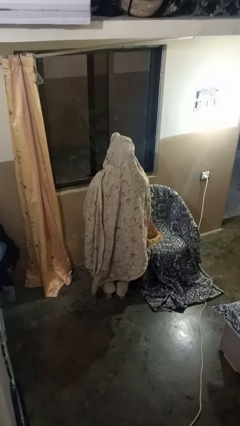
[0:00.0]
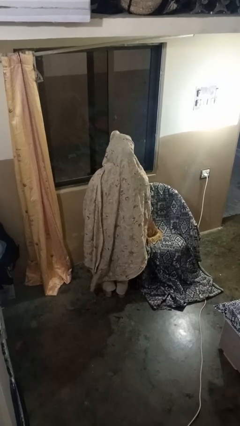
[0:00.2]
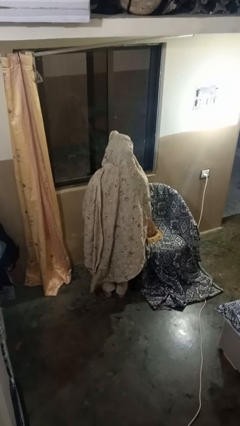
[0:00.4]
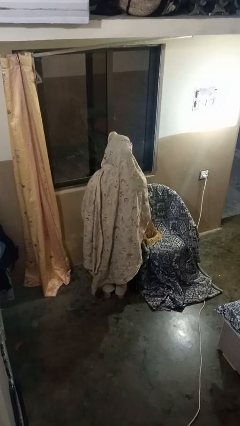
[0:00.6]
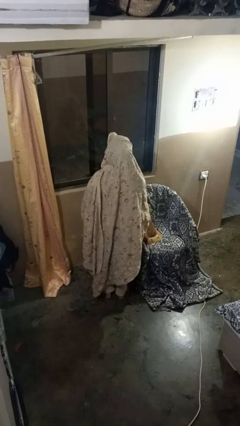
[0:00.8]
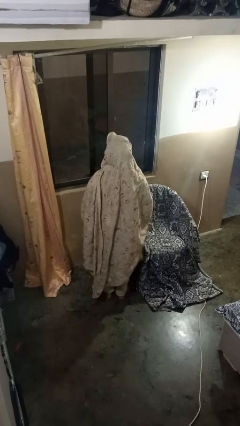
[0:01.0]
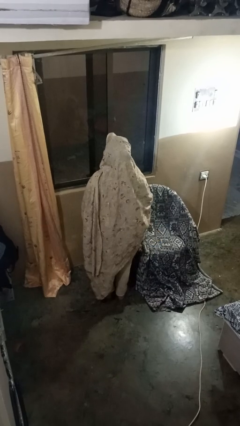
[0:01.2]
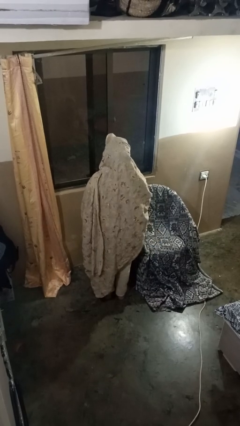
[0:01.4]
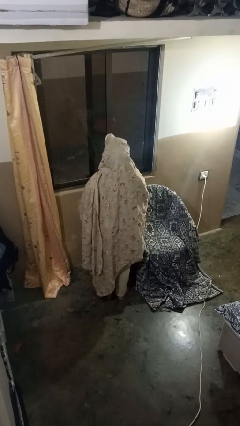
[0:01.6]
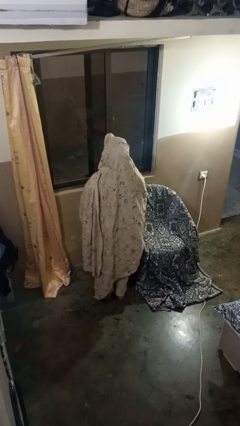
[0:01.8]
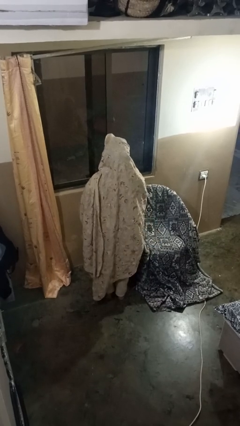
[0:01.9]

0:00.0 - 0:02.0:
person picks up object from couch

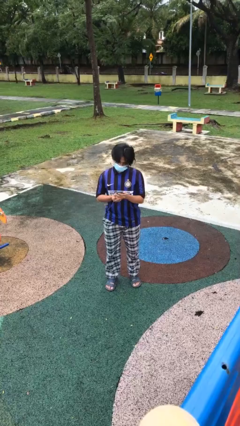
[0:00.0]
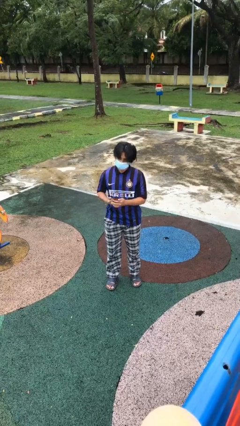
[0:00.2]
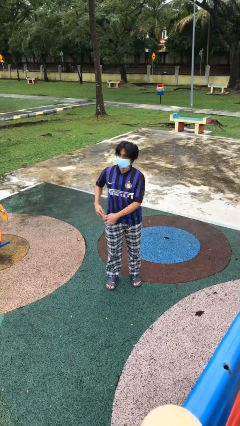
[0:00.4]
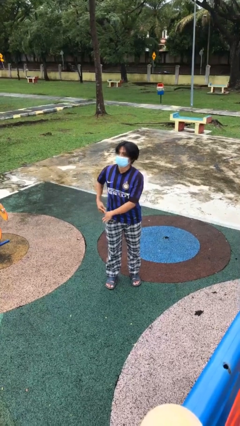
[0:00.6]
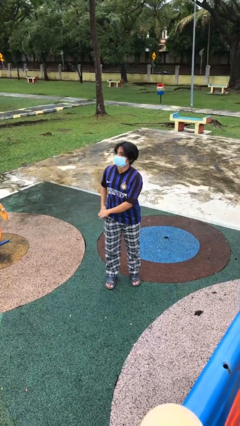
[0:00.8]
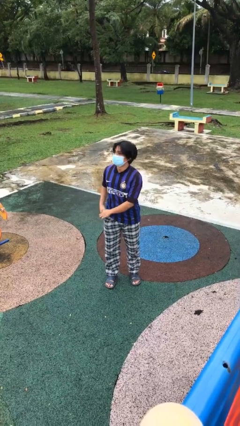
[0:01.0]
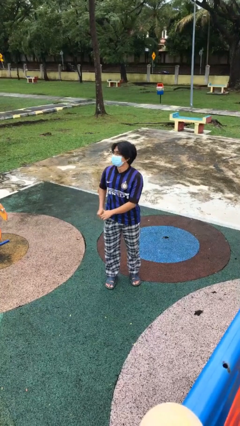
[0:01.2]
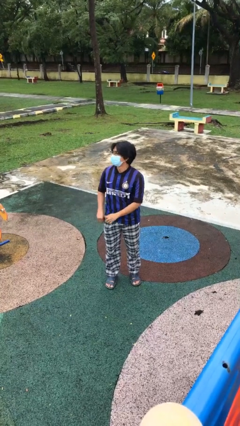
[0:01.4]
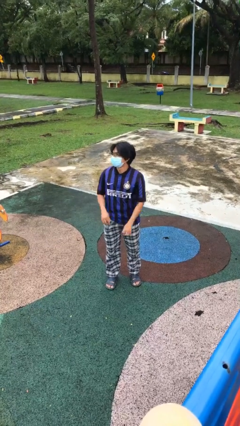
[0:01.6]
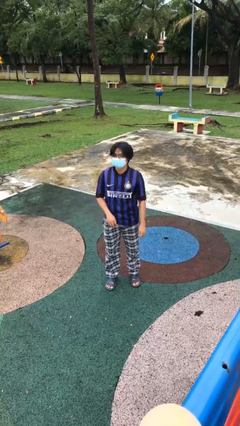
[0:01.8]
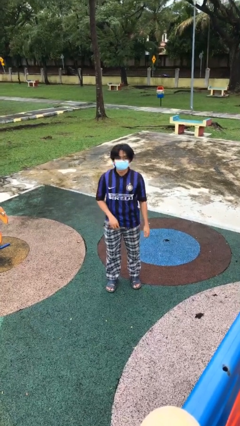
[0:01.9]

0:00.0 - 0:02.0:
person puts phone into pocket

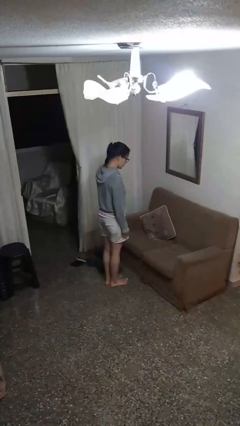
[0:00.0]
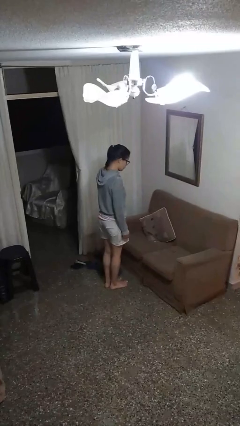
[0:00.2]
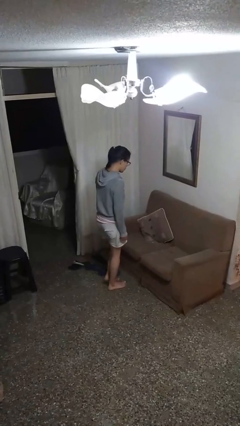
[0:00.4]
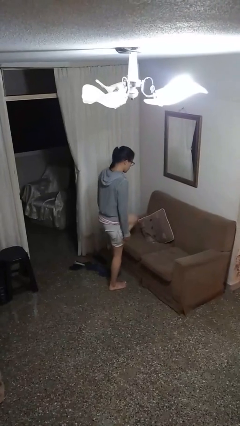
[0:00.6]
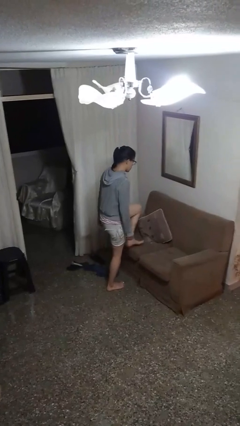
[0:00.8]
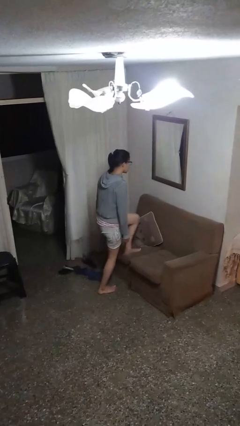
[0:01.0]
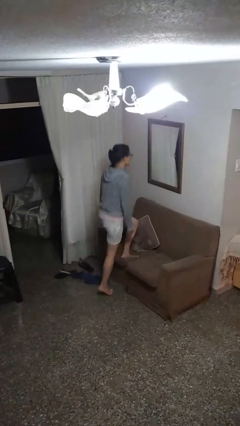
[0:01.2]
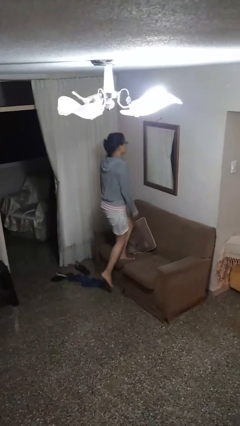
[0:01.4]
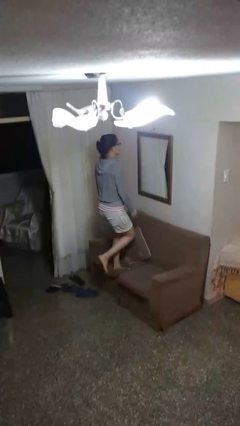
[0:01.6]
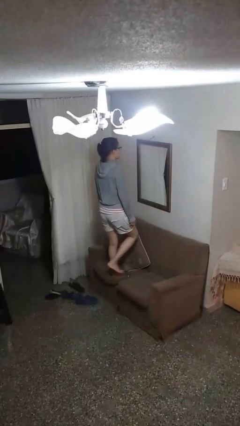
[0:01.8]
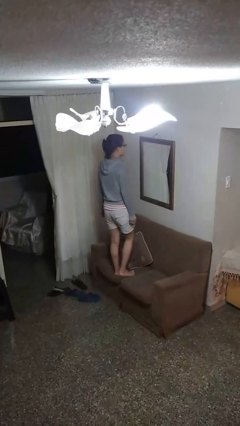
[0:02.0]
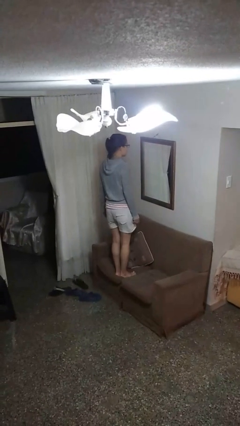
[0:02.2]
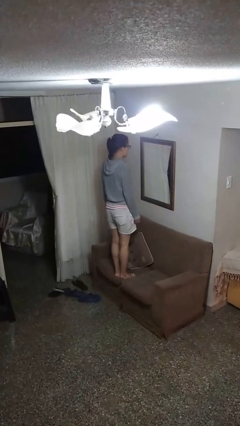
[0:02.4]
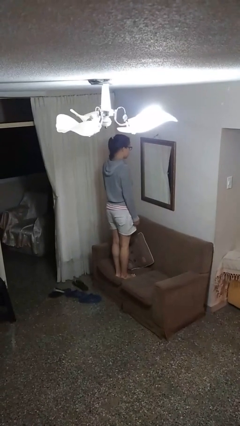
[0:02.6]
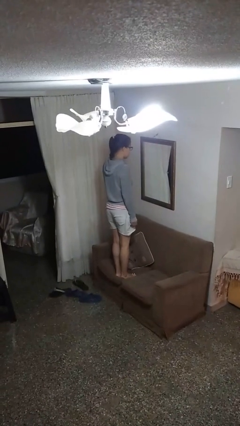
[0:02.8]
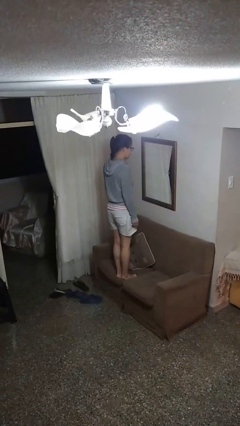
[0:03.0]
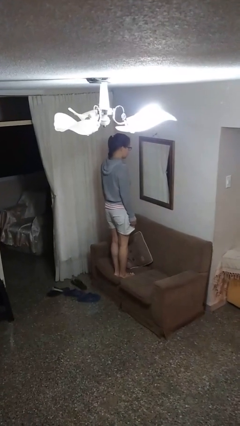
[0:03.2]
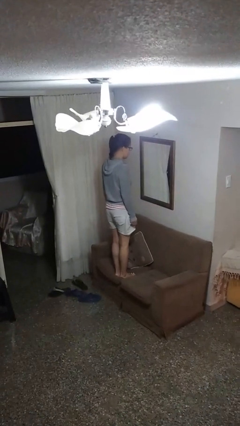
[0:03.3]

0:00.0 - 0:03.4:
person climbs on couch

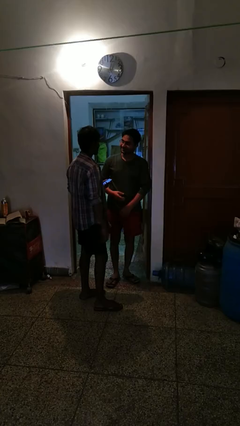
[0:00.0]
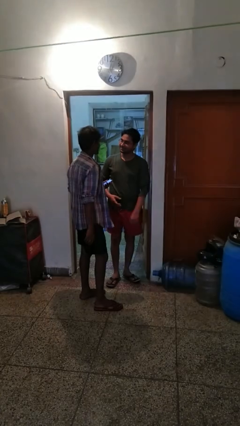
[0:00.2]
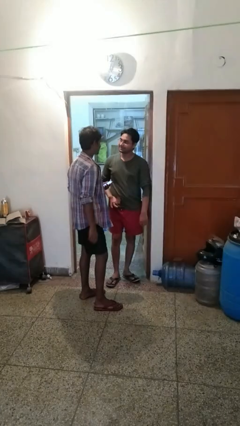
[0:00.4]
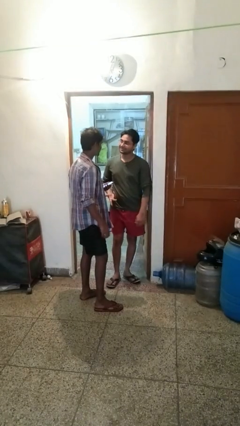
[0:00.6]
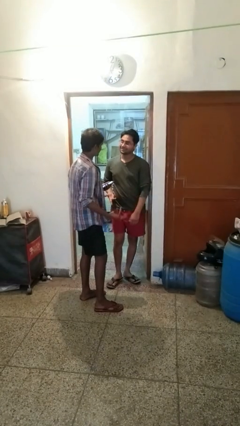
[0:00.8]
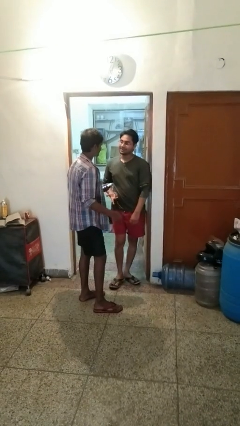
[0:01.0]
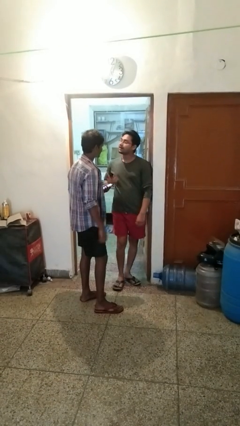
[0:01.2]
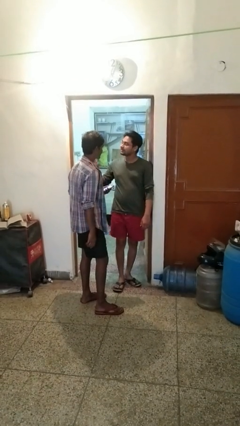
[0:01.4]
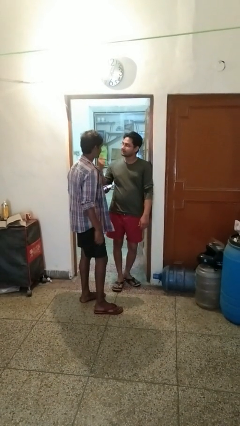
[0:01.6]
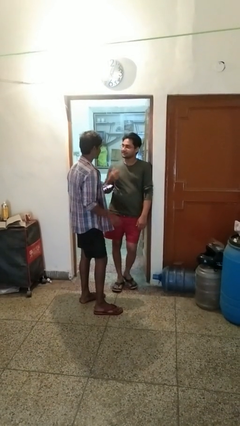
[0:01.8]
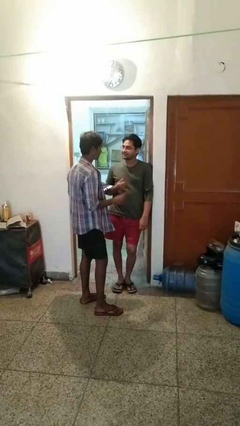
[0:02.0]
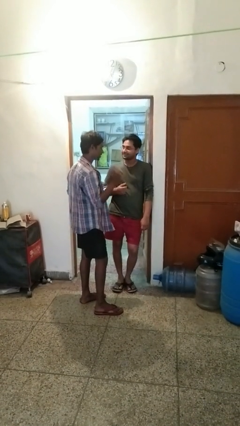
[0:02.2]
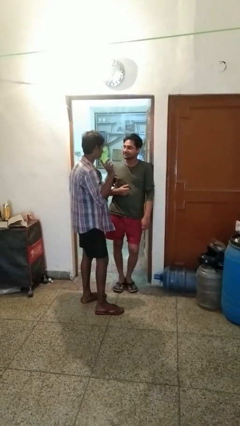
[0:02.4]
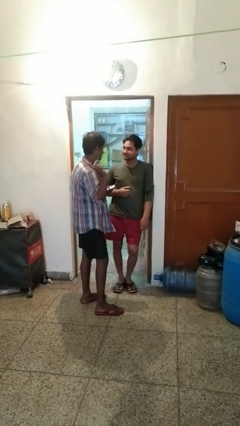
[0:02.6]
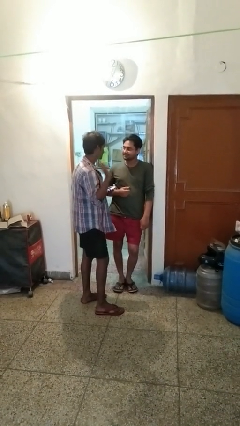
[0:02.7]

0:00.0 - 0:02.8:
person highfives hand

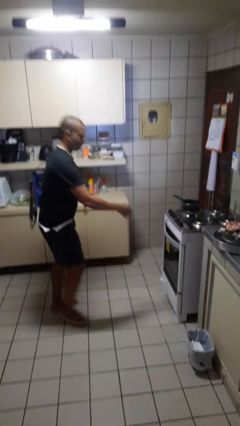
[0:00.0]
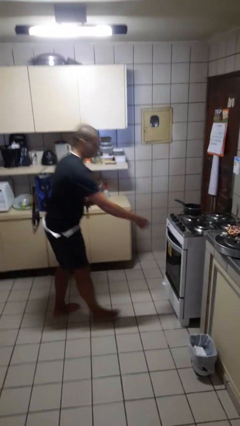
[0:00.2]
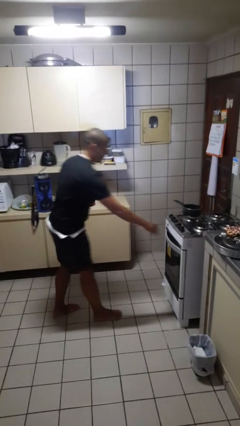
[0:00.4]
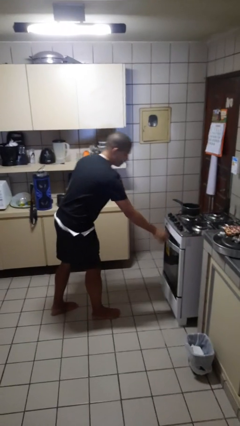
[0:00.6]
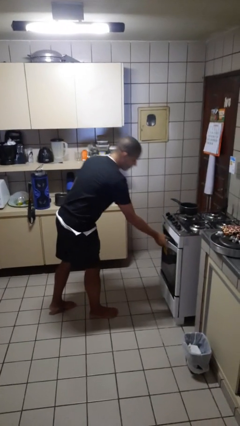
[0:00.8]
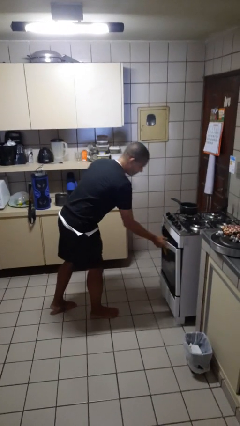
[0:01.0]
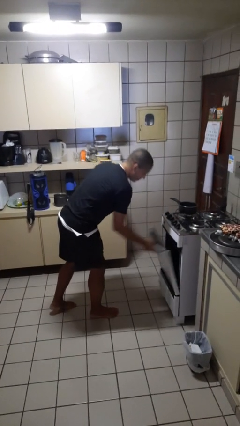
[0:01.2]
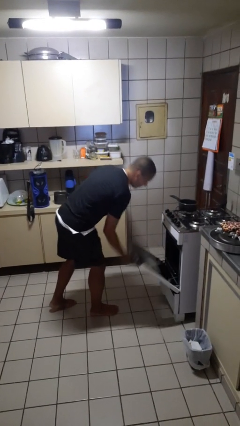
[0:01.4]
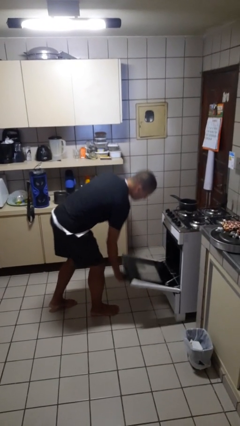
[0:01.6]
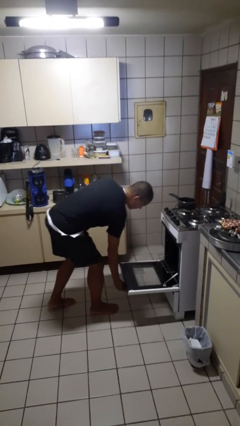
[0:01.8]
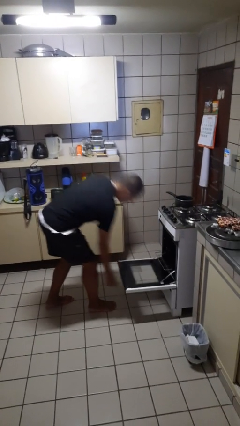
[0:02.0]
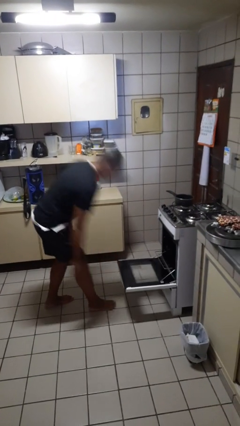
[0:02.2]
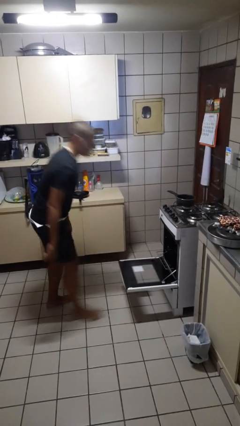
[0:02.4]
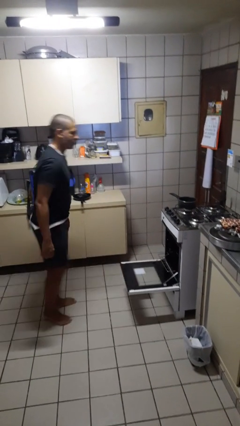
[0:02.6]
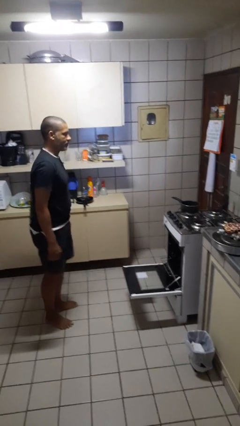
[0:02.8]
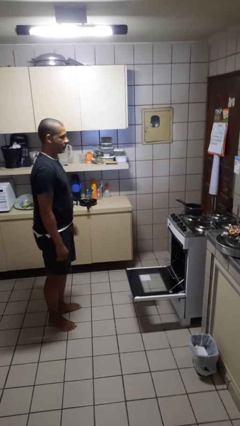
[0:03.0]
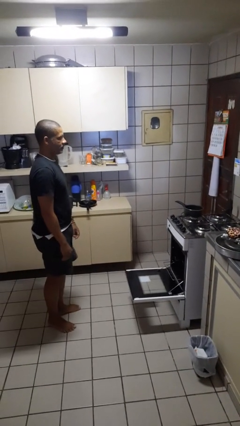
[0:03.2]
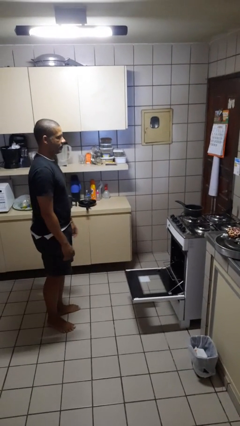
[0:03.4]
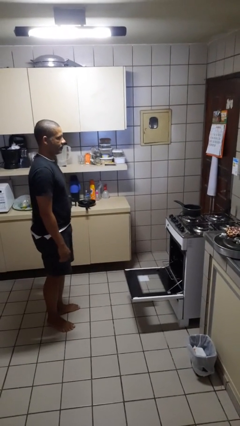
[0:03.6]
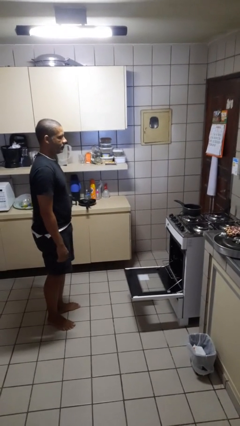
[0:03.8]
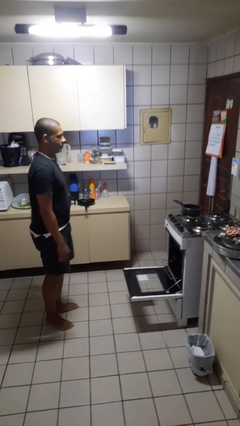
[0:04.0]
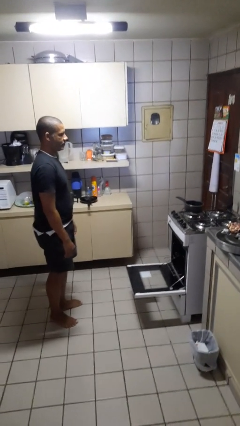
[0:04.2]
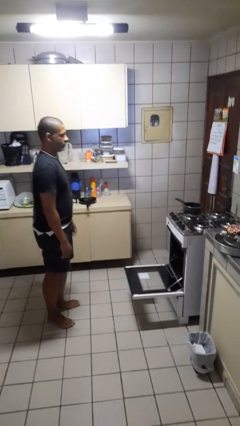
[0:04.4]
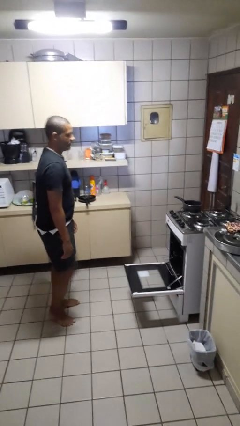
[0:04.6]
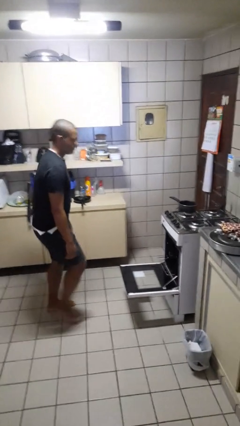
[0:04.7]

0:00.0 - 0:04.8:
person opens oven door

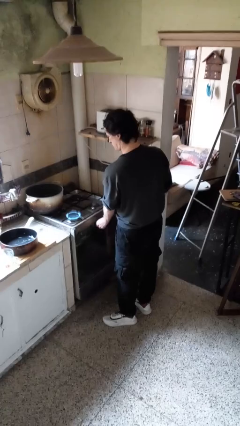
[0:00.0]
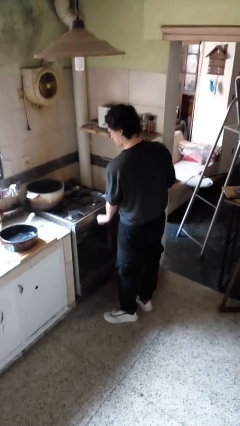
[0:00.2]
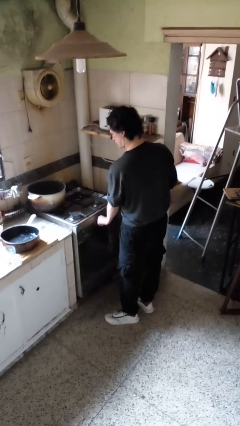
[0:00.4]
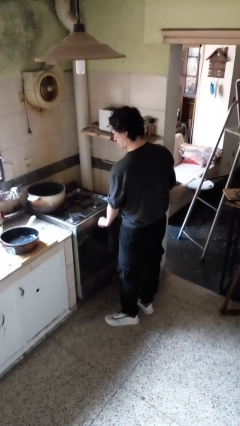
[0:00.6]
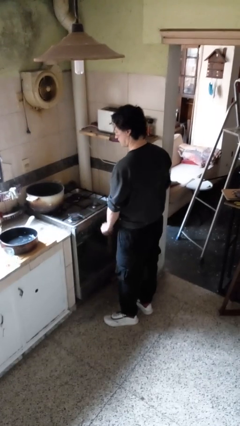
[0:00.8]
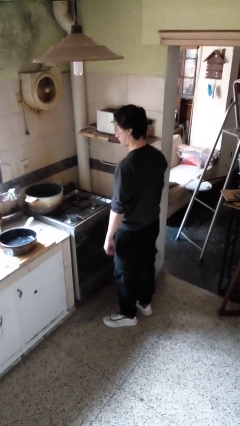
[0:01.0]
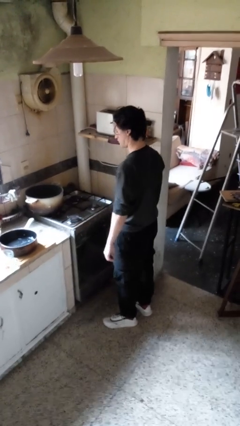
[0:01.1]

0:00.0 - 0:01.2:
person turns off stovetop

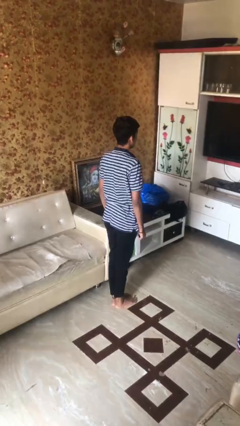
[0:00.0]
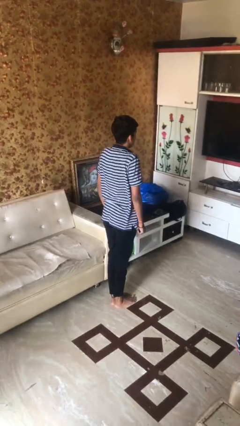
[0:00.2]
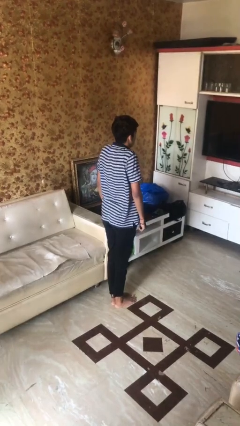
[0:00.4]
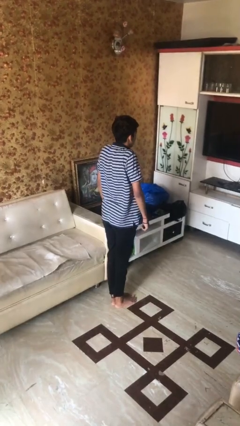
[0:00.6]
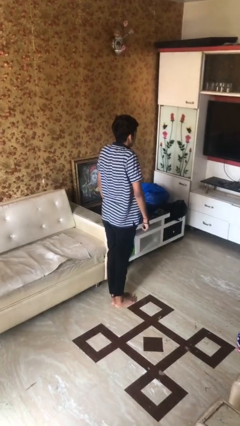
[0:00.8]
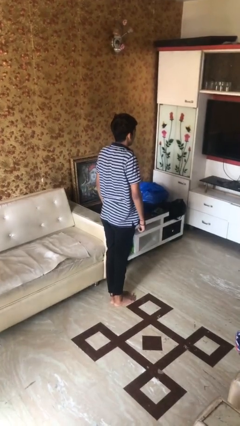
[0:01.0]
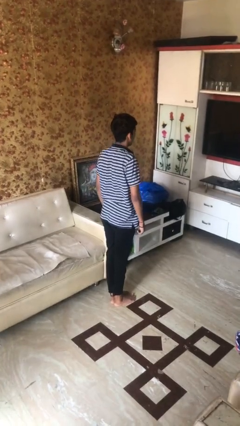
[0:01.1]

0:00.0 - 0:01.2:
person shrugs
